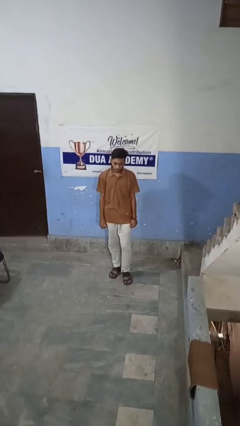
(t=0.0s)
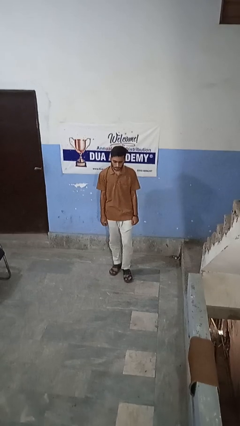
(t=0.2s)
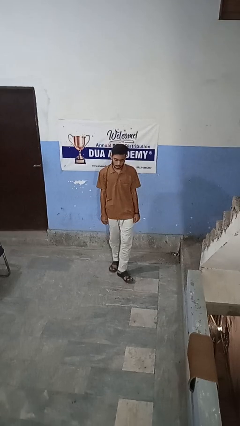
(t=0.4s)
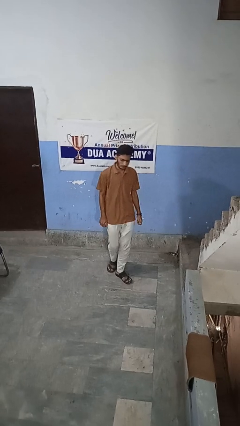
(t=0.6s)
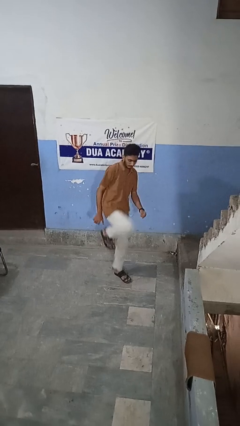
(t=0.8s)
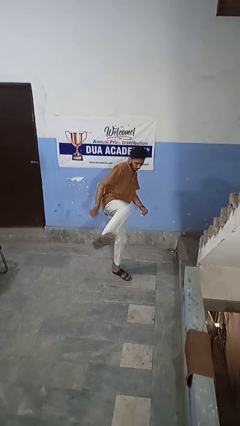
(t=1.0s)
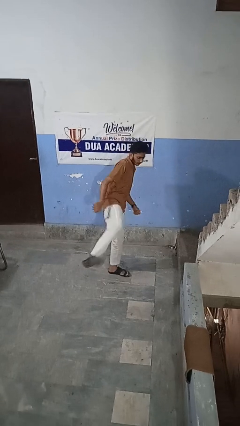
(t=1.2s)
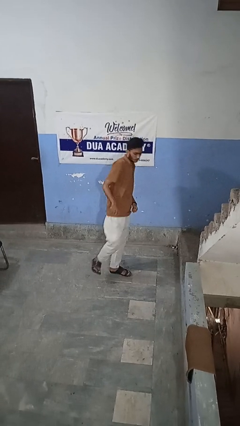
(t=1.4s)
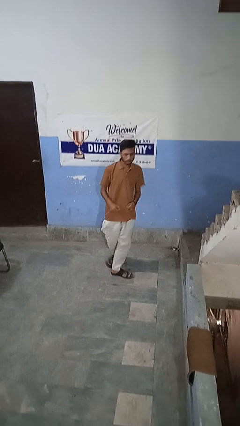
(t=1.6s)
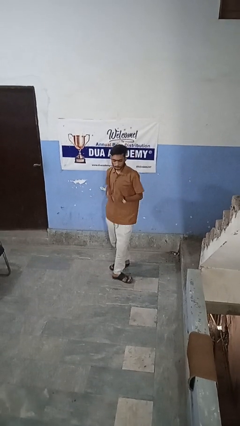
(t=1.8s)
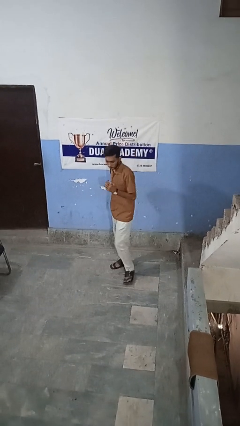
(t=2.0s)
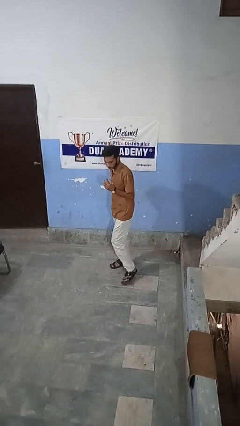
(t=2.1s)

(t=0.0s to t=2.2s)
person karate kicks

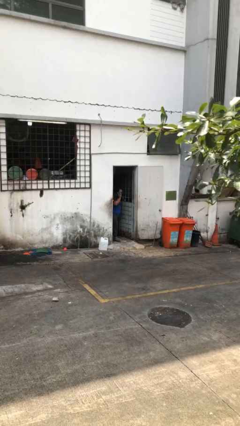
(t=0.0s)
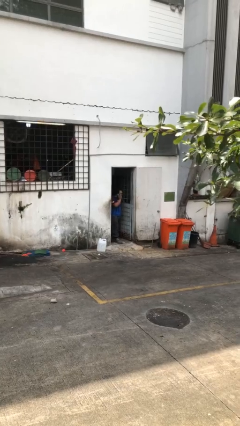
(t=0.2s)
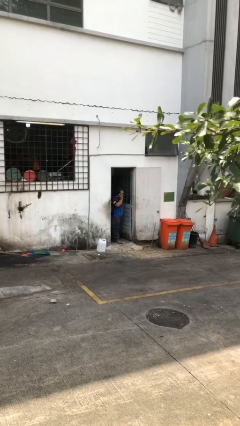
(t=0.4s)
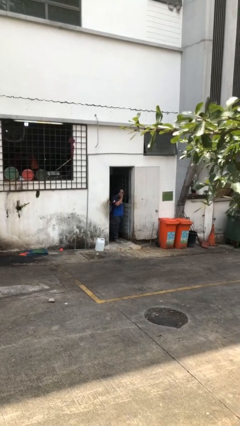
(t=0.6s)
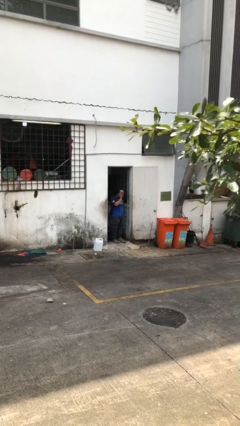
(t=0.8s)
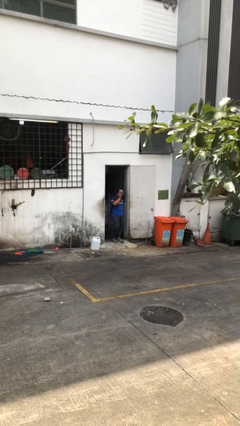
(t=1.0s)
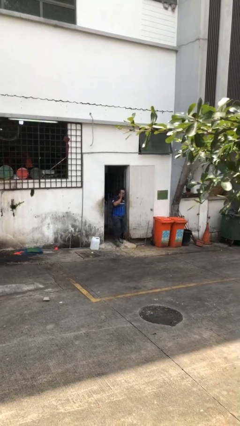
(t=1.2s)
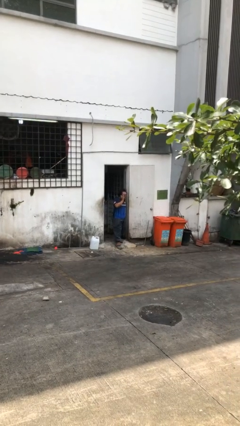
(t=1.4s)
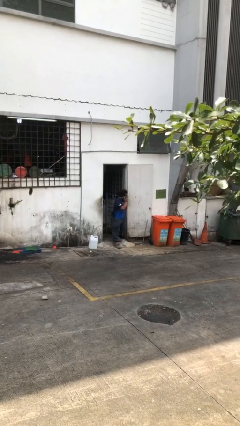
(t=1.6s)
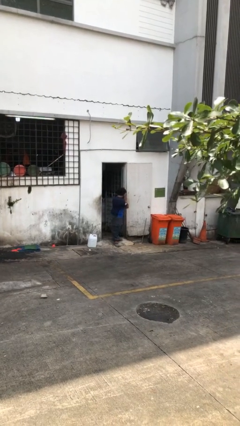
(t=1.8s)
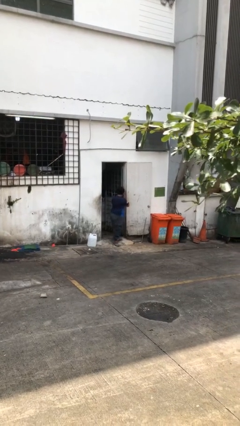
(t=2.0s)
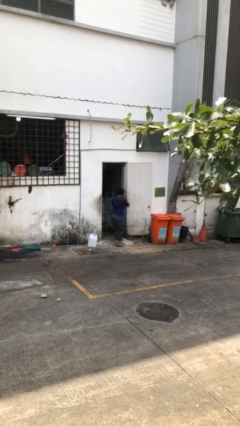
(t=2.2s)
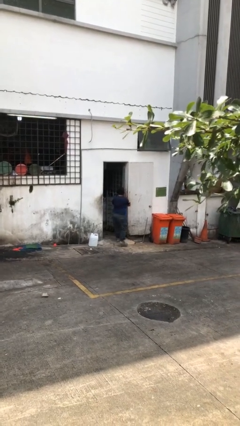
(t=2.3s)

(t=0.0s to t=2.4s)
person enters scene through structure

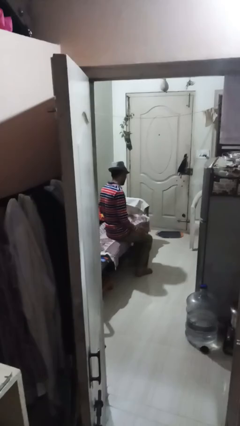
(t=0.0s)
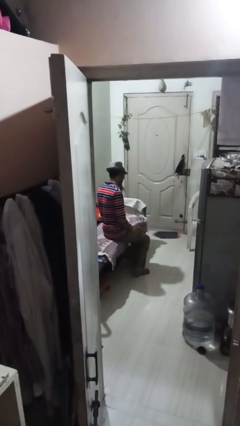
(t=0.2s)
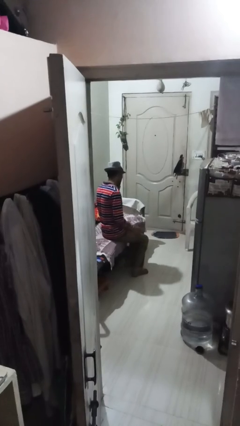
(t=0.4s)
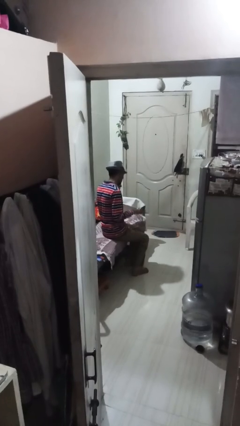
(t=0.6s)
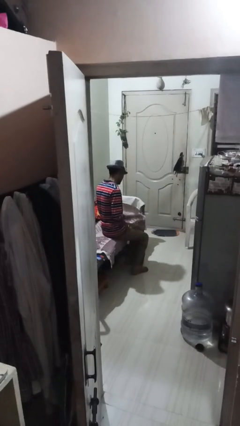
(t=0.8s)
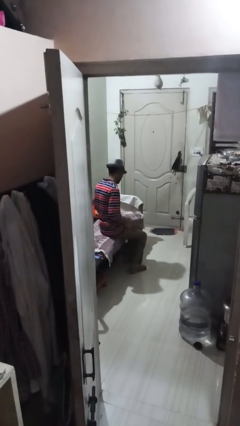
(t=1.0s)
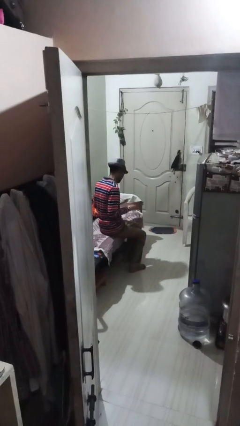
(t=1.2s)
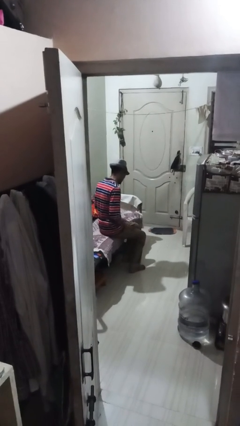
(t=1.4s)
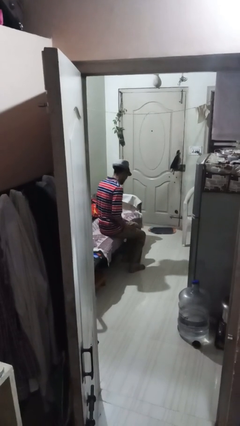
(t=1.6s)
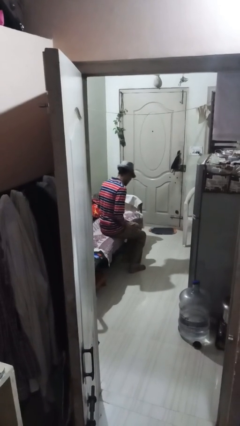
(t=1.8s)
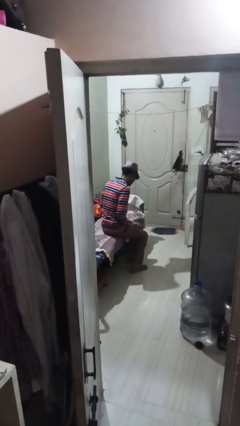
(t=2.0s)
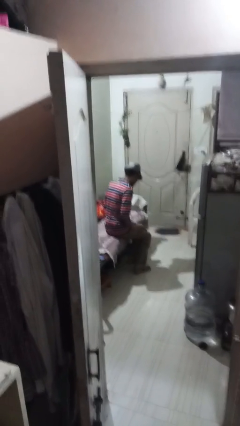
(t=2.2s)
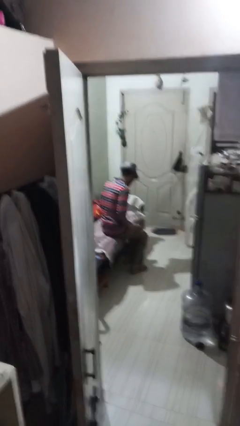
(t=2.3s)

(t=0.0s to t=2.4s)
person slaps hands on thighs

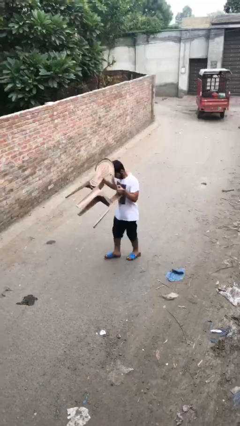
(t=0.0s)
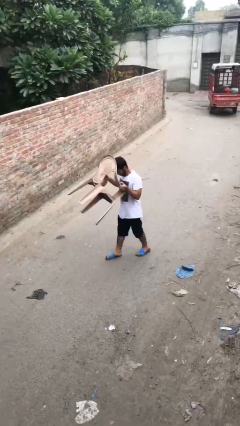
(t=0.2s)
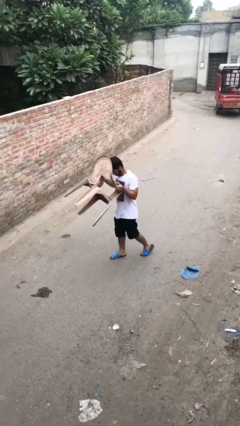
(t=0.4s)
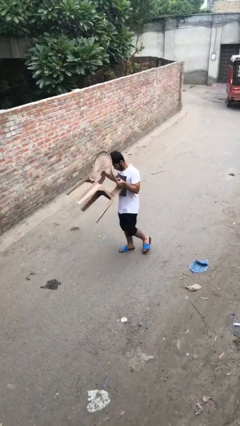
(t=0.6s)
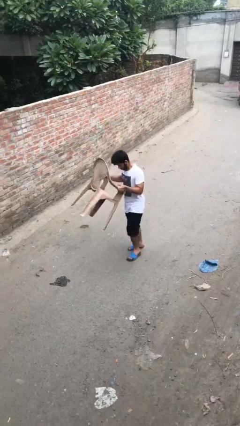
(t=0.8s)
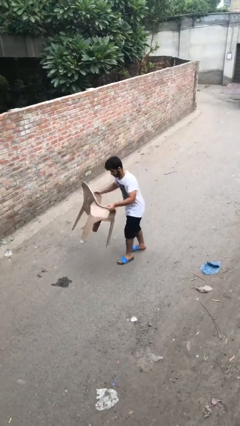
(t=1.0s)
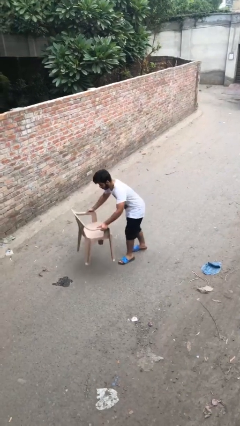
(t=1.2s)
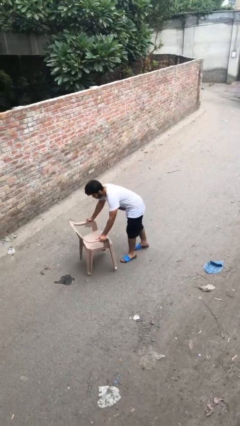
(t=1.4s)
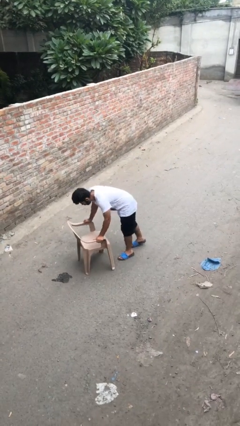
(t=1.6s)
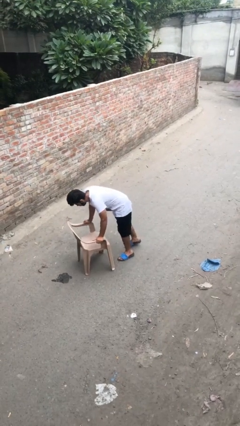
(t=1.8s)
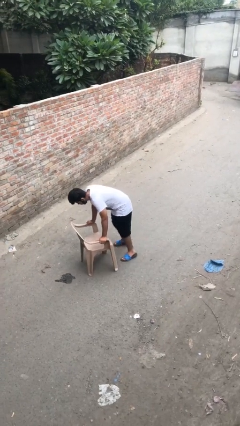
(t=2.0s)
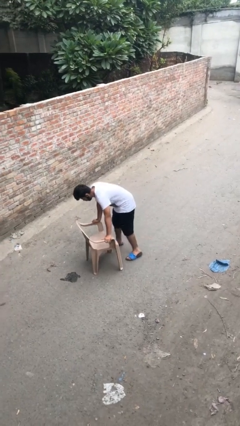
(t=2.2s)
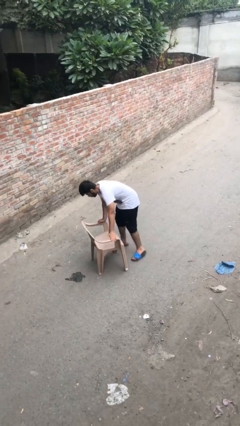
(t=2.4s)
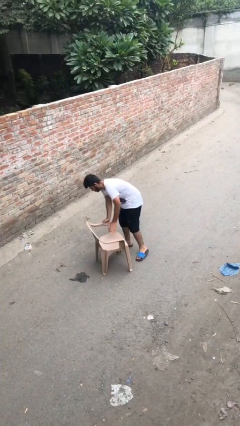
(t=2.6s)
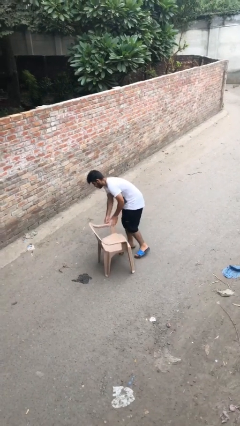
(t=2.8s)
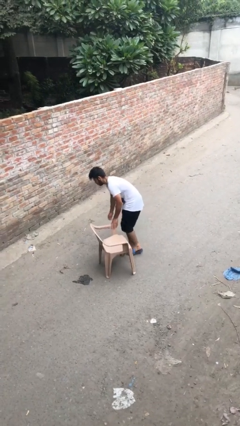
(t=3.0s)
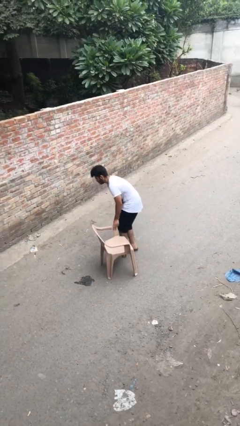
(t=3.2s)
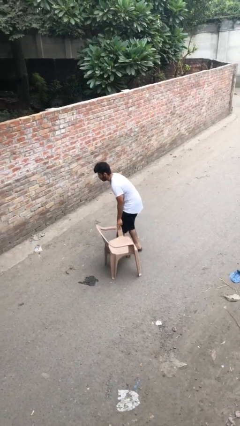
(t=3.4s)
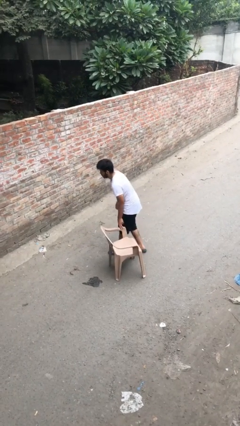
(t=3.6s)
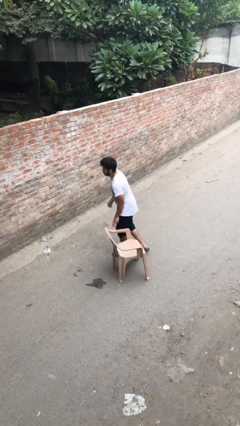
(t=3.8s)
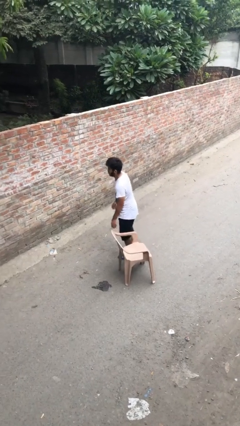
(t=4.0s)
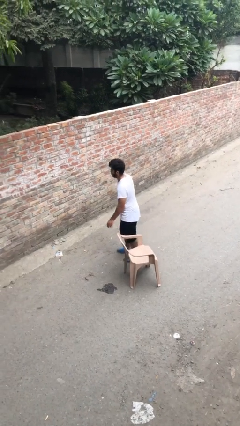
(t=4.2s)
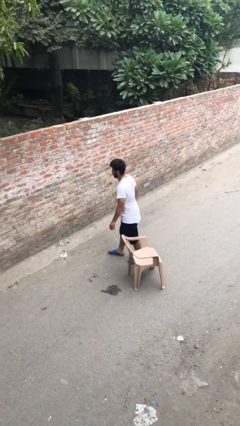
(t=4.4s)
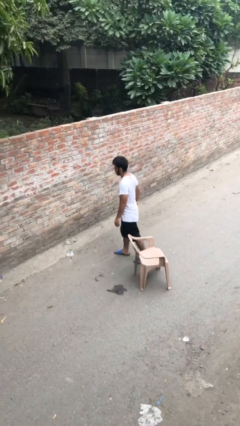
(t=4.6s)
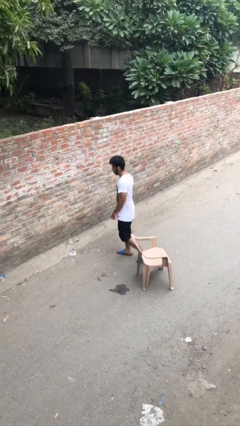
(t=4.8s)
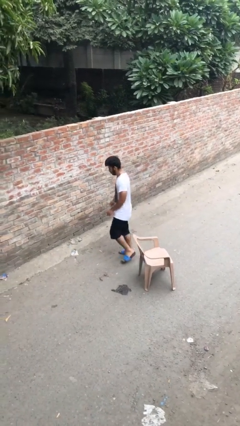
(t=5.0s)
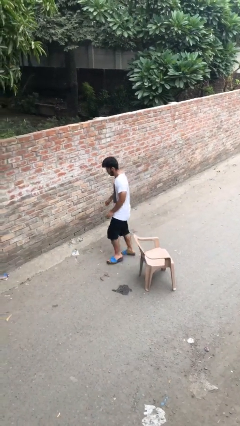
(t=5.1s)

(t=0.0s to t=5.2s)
person puts down object on floor

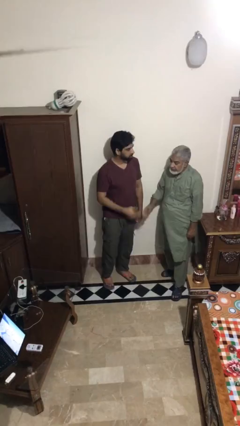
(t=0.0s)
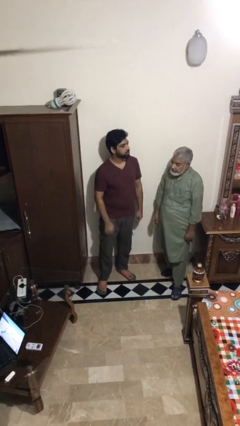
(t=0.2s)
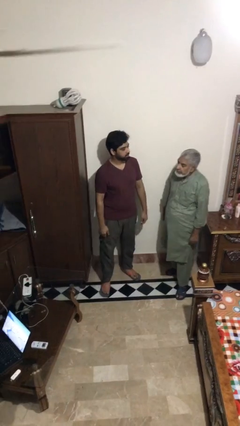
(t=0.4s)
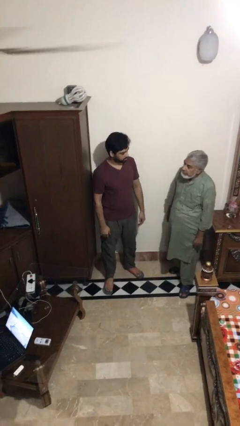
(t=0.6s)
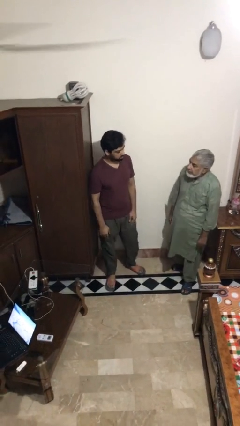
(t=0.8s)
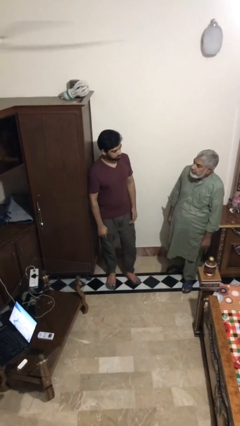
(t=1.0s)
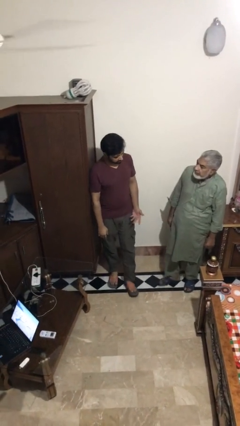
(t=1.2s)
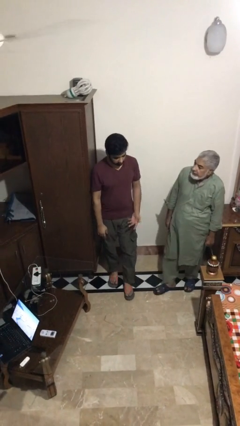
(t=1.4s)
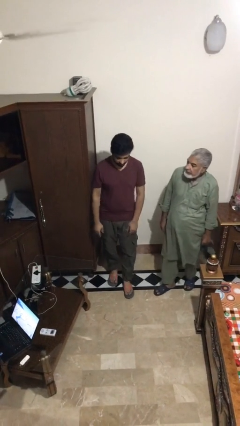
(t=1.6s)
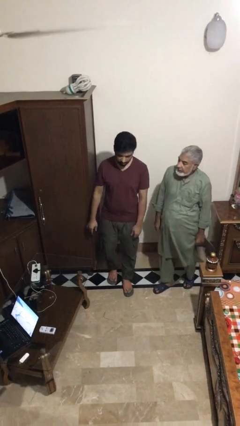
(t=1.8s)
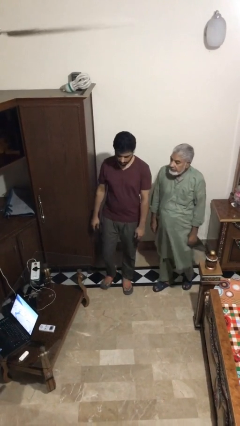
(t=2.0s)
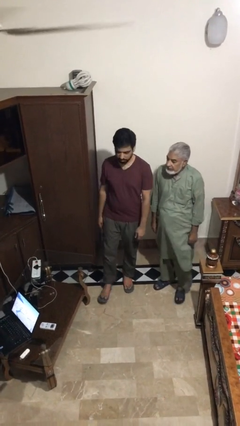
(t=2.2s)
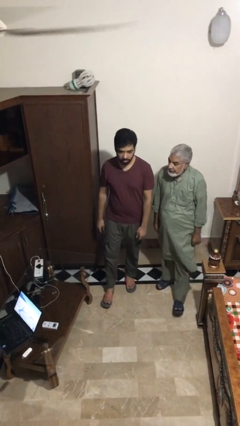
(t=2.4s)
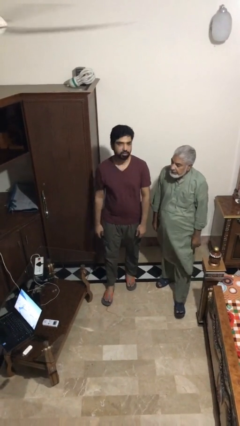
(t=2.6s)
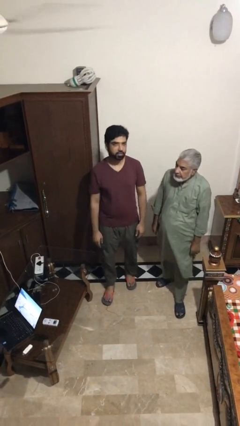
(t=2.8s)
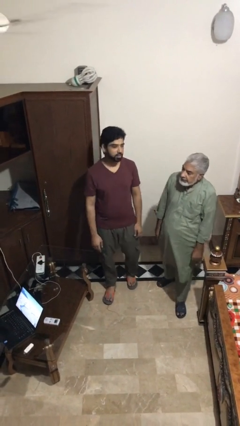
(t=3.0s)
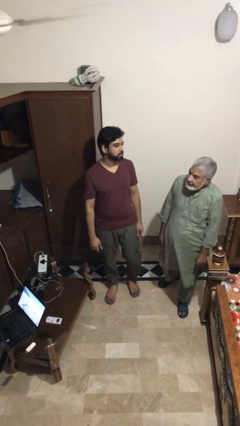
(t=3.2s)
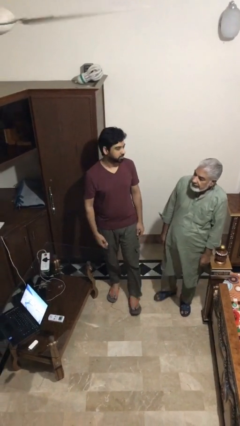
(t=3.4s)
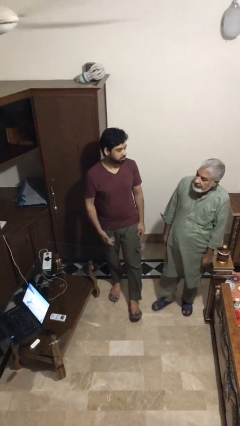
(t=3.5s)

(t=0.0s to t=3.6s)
person talks to person

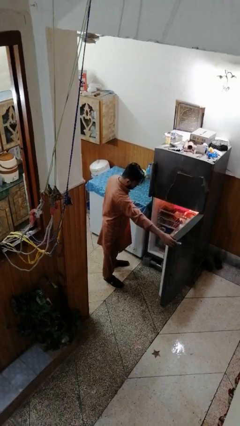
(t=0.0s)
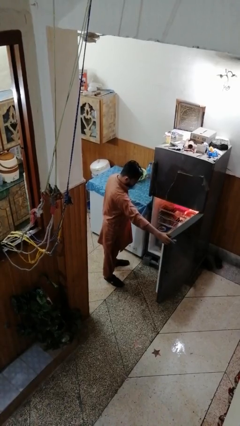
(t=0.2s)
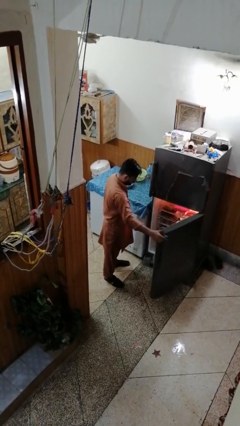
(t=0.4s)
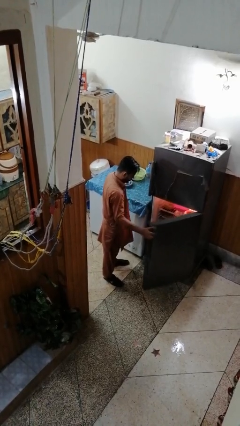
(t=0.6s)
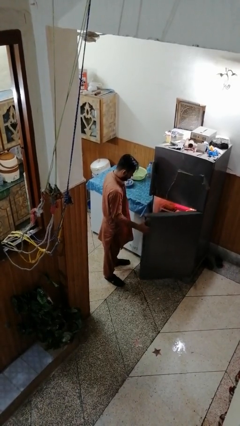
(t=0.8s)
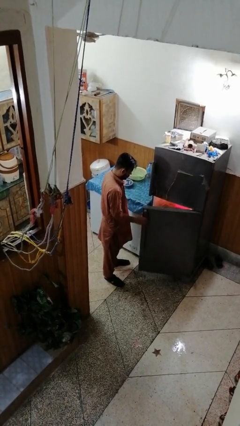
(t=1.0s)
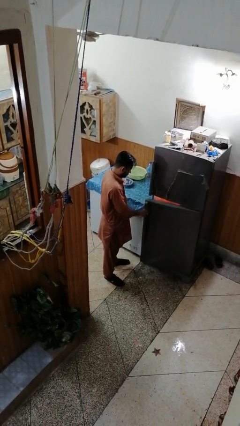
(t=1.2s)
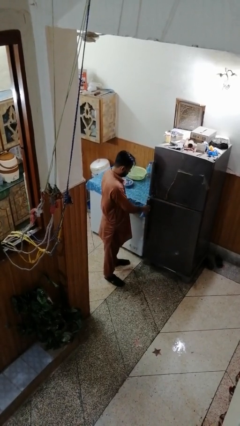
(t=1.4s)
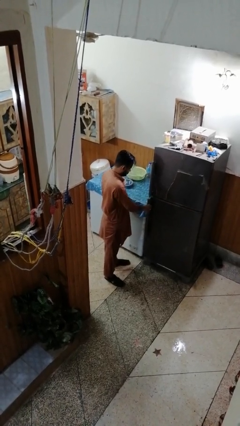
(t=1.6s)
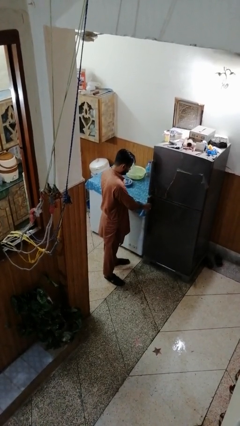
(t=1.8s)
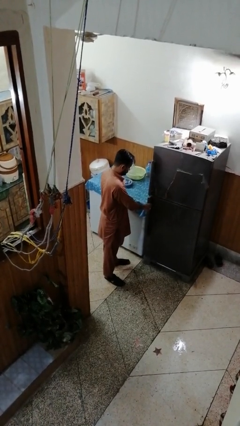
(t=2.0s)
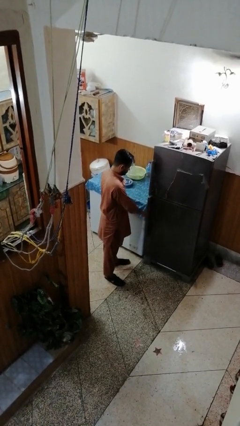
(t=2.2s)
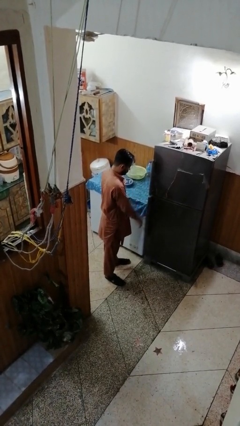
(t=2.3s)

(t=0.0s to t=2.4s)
person closes refrigerator
